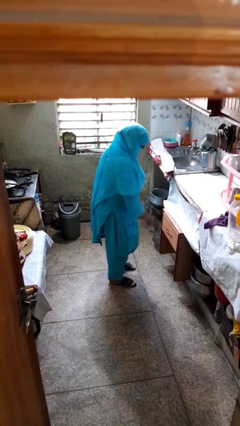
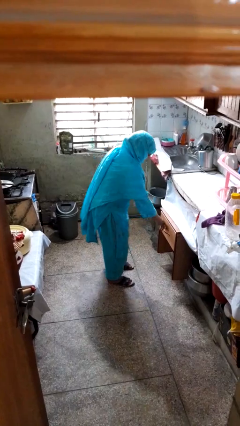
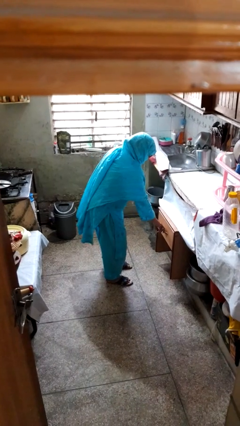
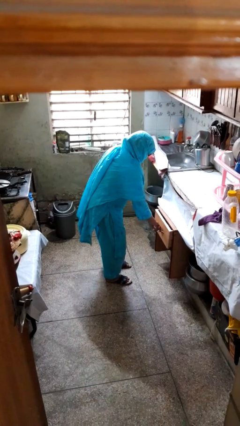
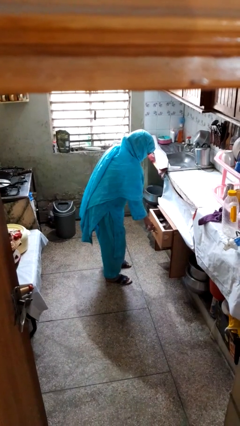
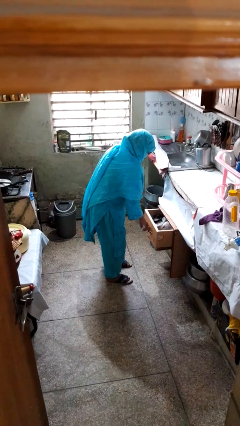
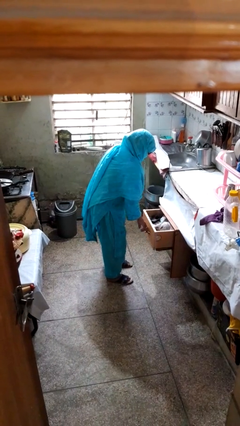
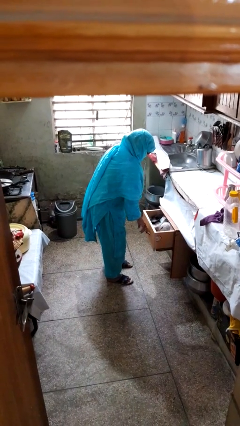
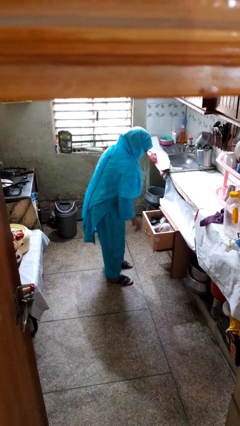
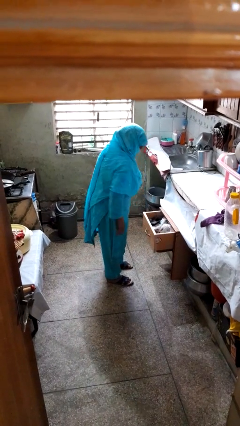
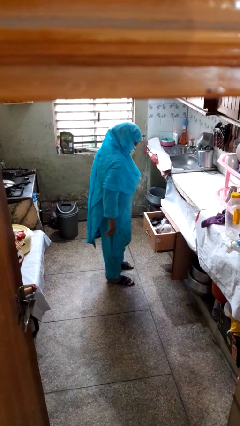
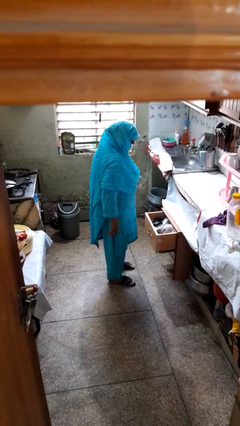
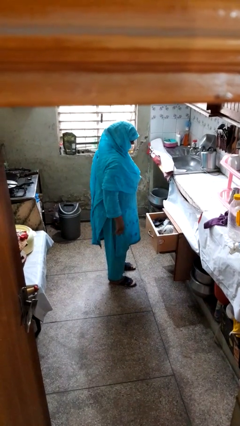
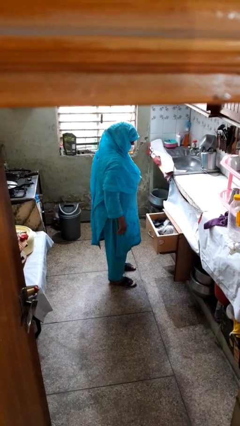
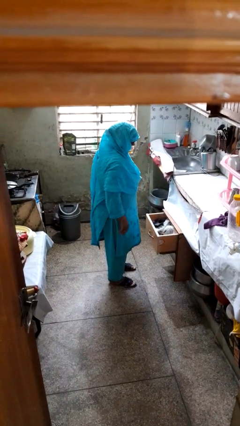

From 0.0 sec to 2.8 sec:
person opens kitchen drawer

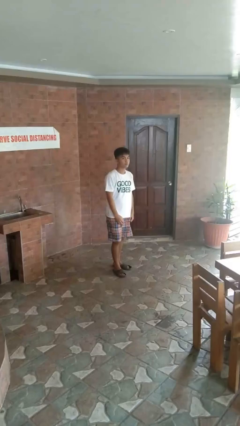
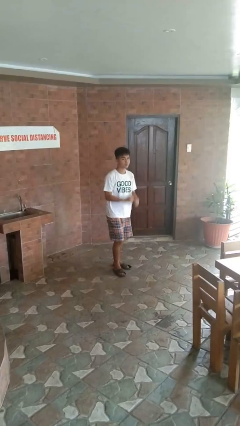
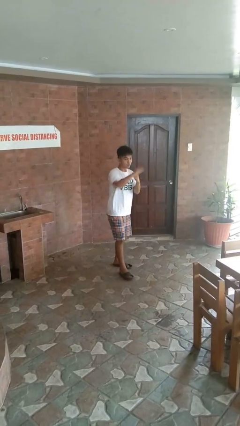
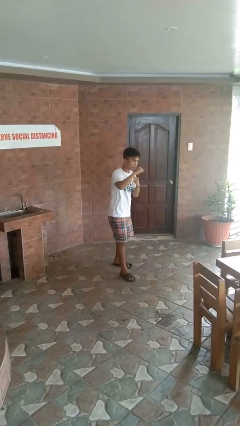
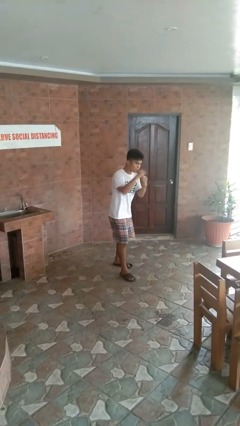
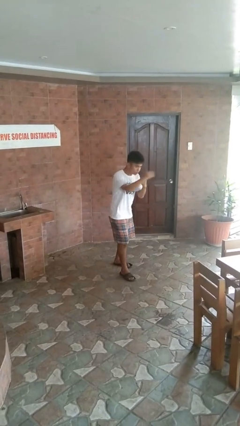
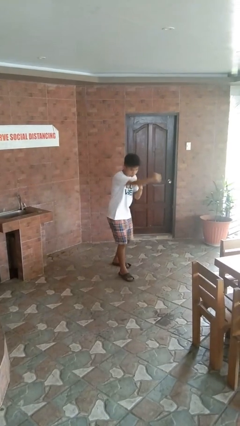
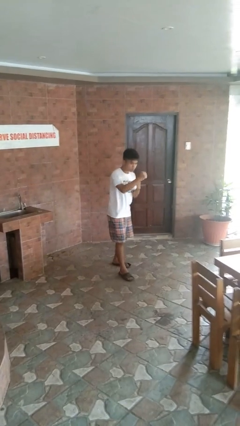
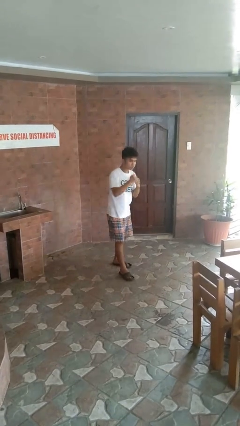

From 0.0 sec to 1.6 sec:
person punches

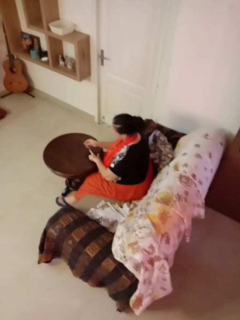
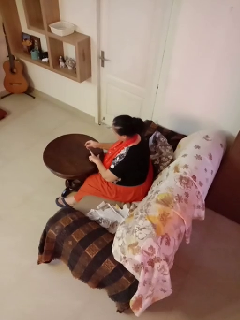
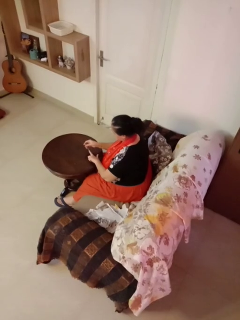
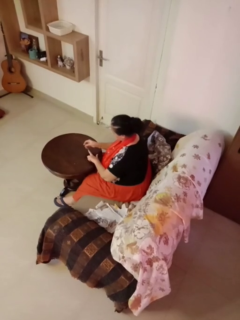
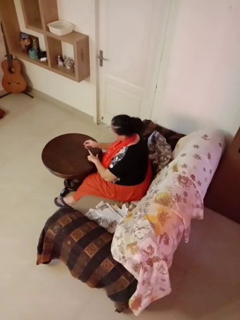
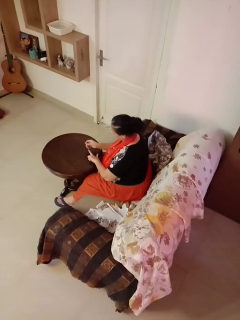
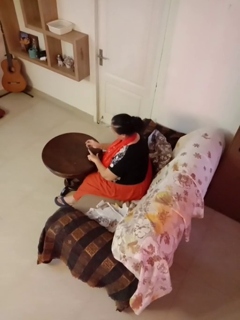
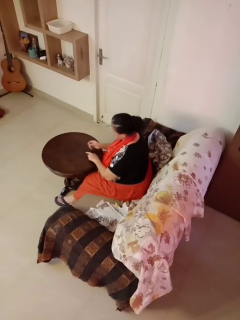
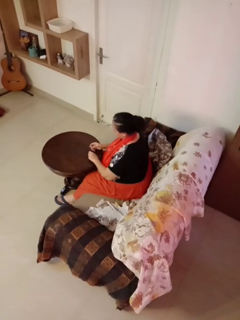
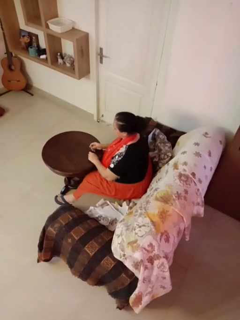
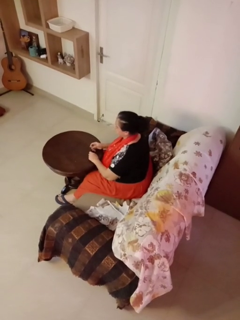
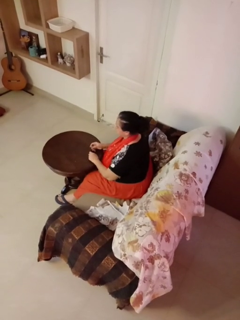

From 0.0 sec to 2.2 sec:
person clips fingernails

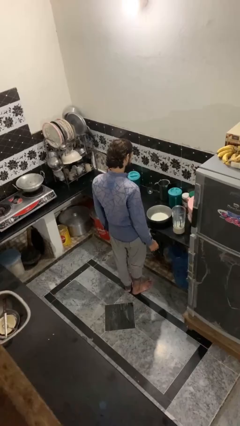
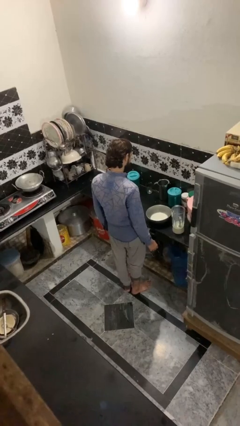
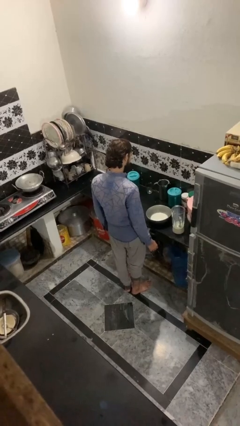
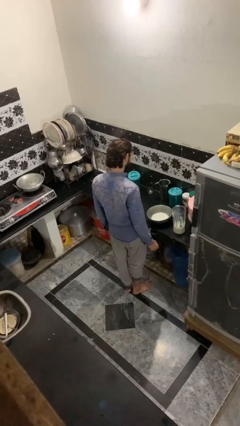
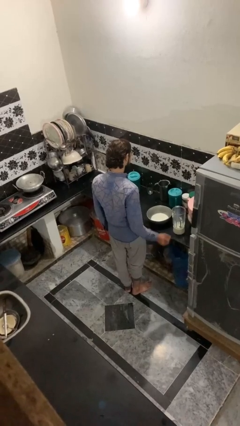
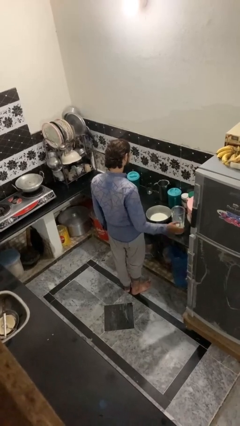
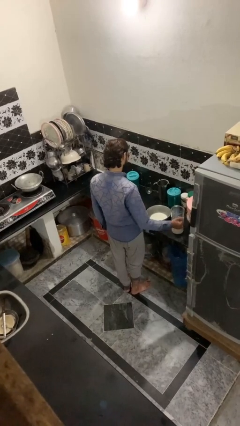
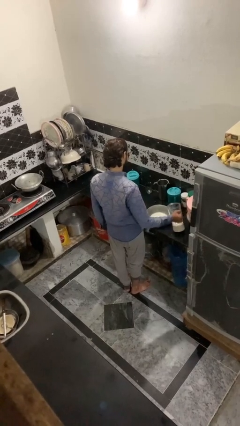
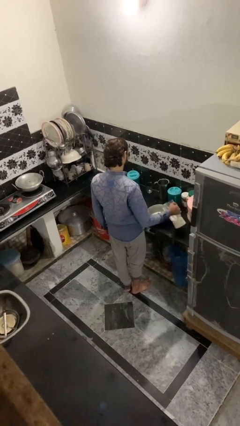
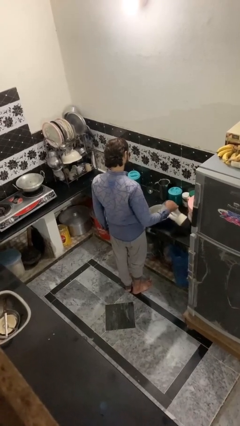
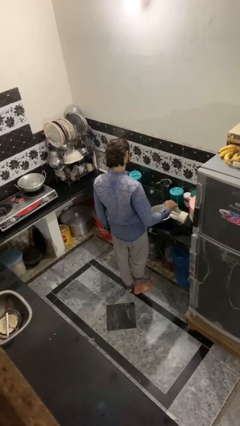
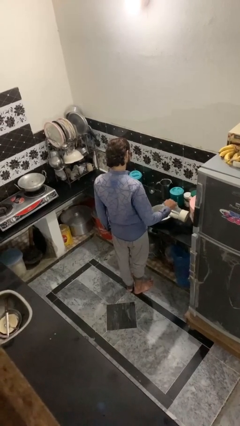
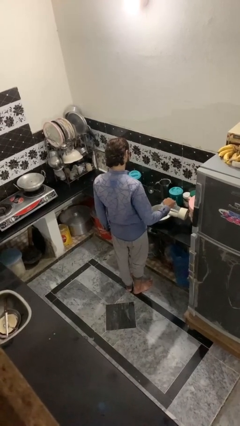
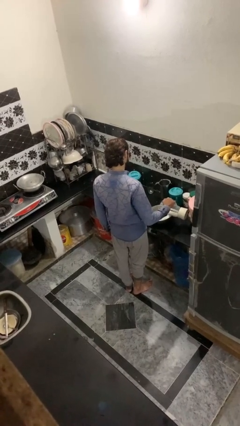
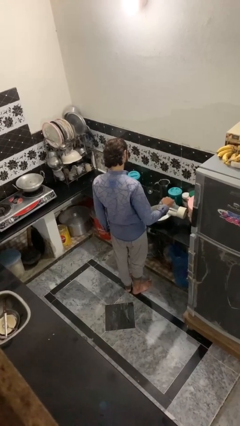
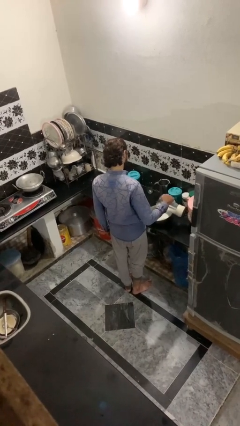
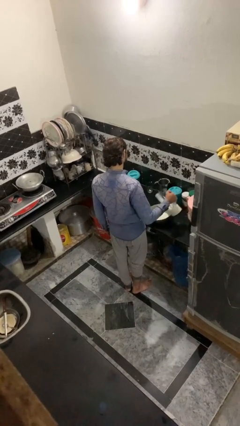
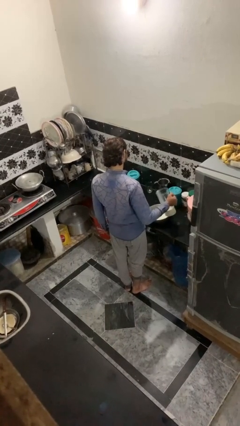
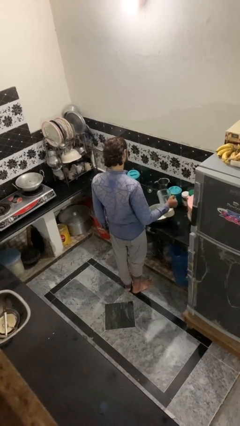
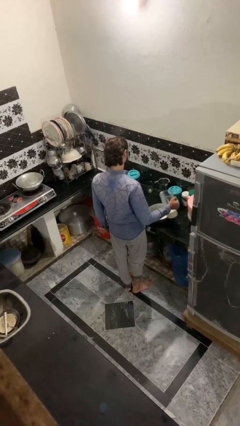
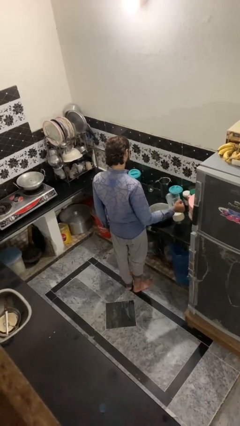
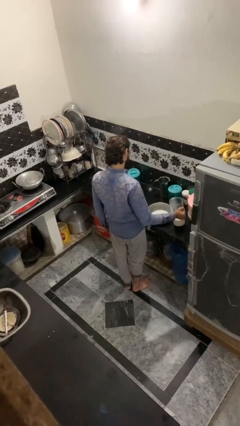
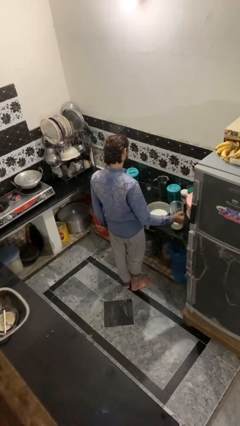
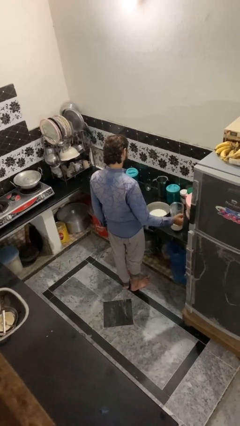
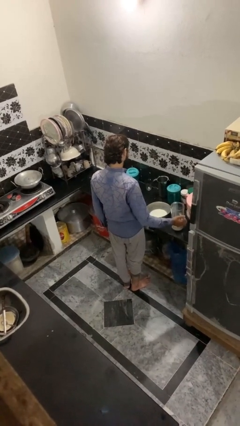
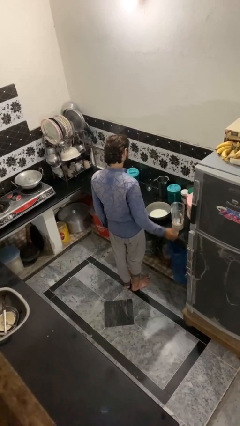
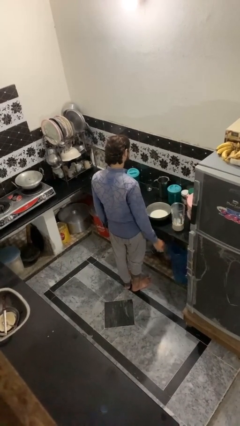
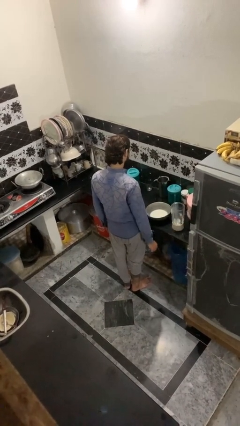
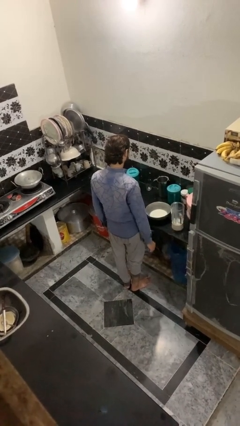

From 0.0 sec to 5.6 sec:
person pours into bowl

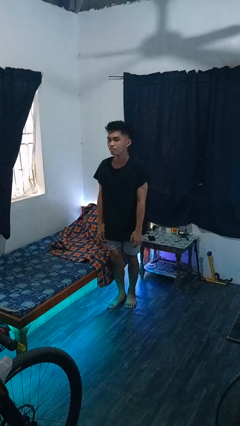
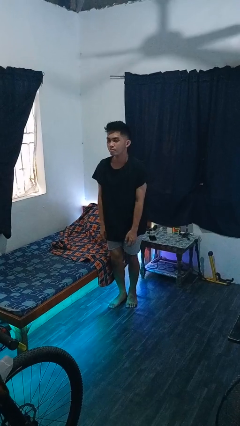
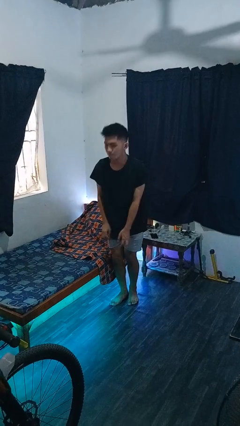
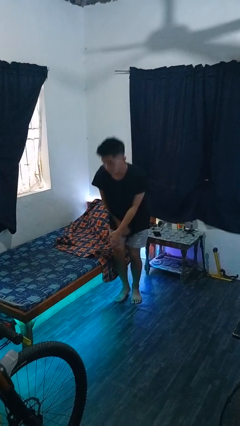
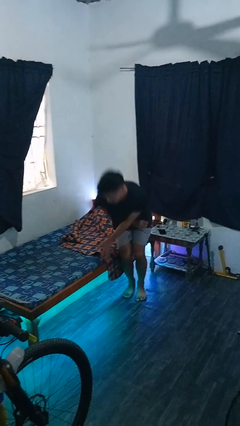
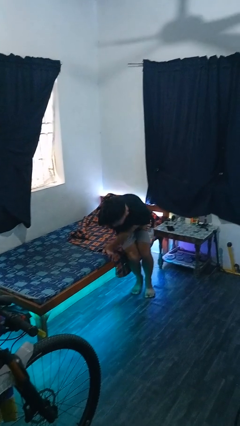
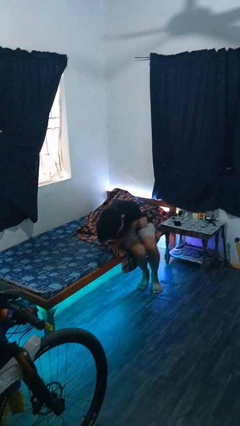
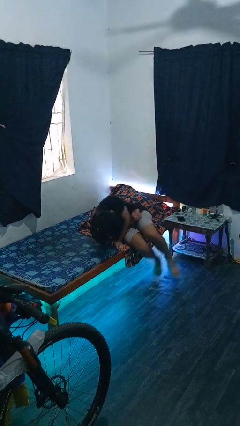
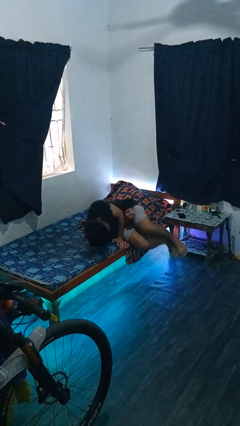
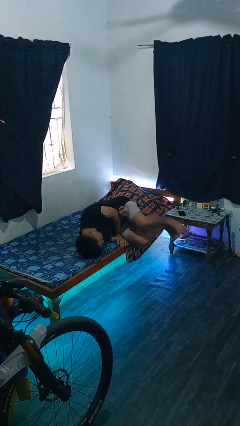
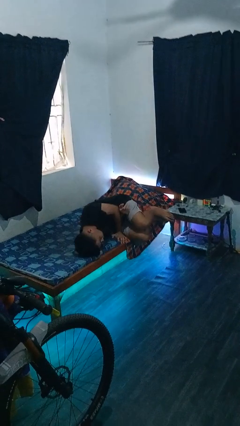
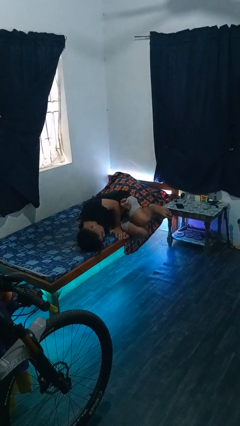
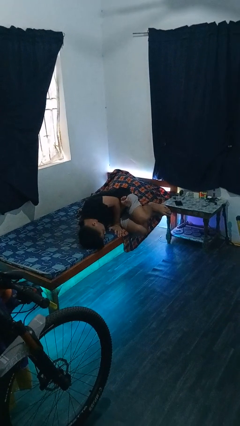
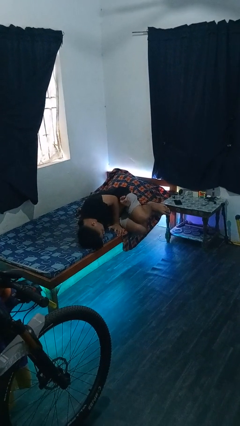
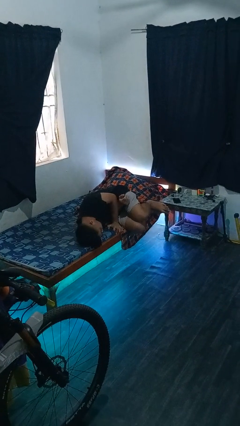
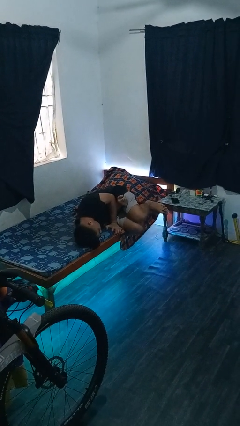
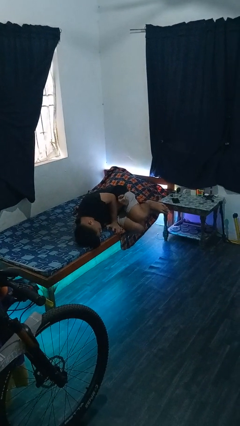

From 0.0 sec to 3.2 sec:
person lies down on bed

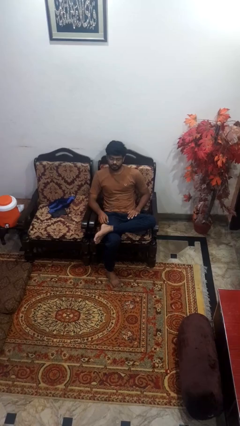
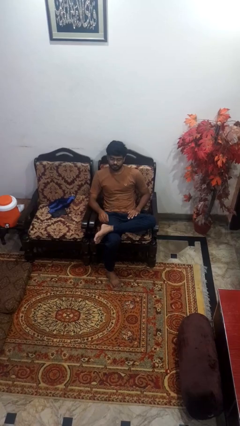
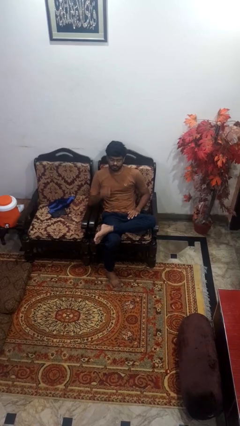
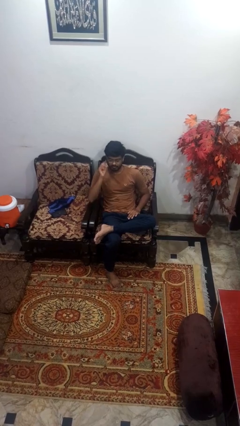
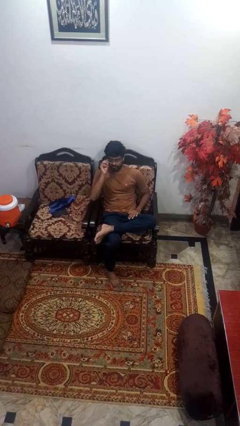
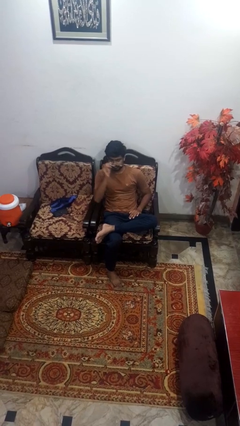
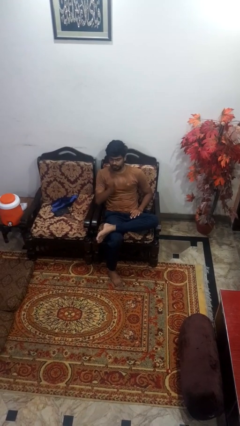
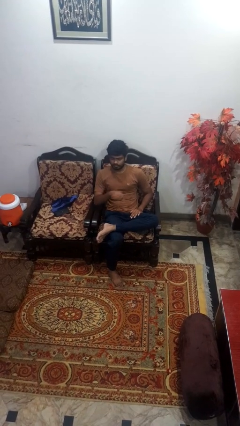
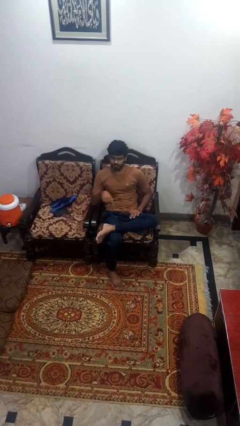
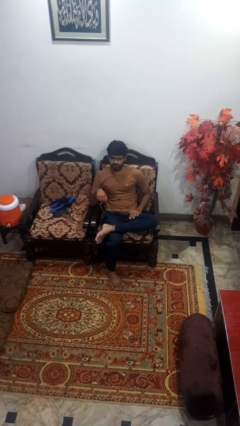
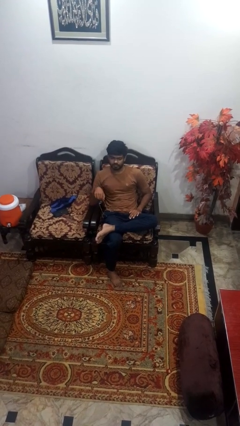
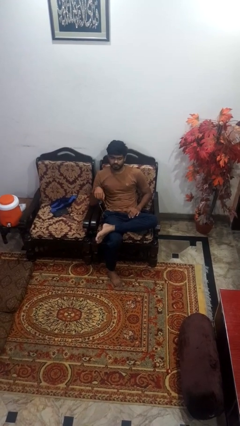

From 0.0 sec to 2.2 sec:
person takes off glasses

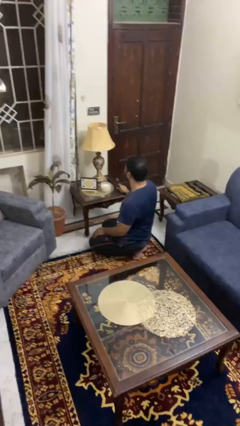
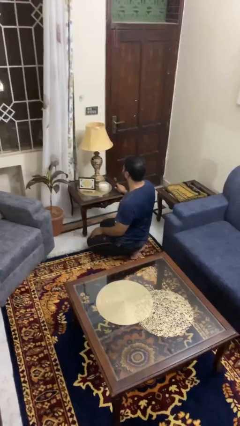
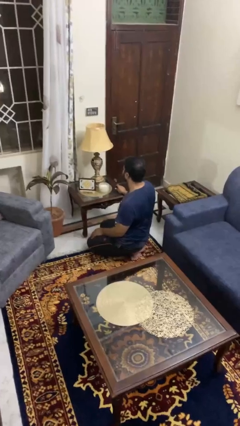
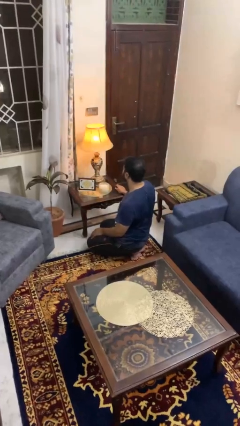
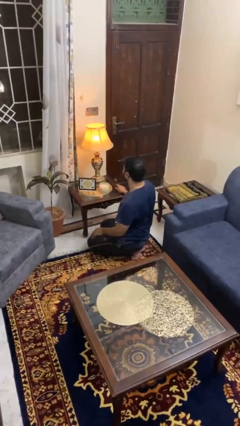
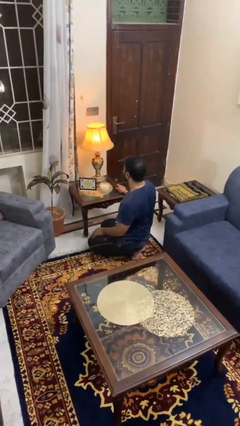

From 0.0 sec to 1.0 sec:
person turns on lamp
